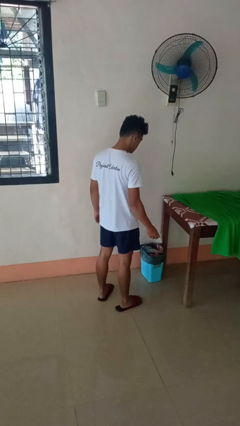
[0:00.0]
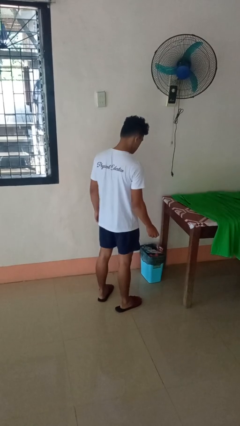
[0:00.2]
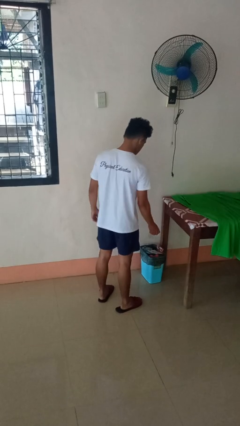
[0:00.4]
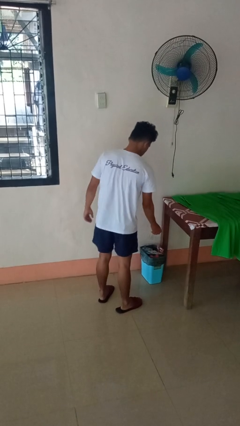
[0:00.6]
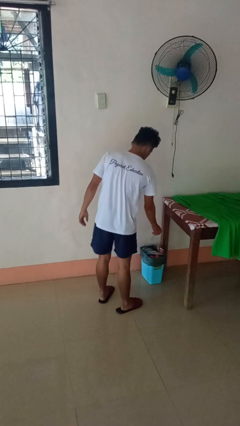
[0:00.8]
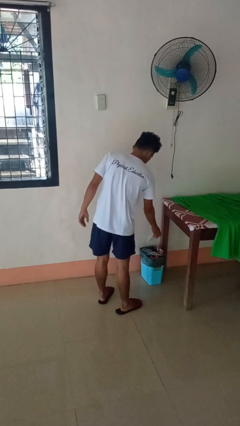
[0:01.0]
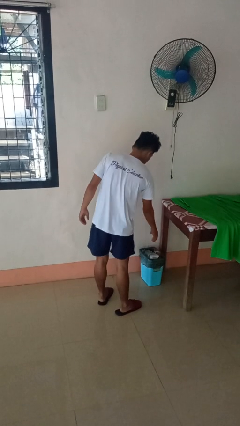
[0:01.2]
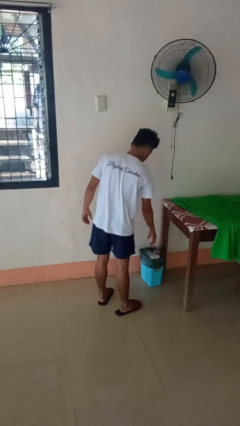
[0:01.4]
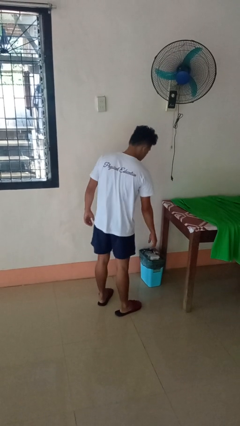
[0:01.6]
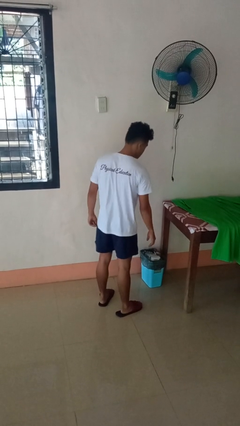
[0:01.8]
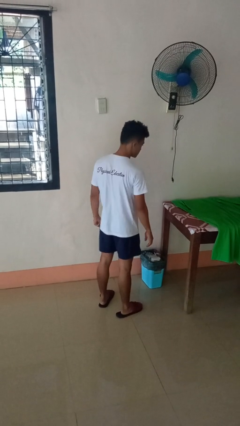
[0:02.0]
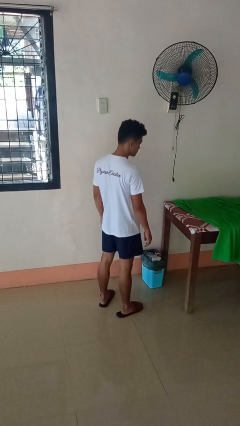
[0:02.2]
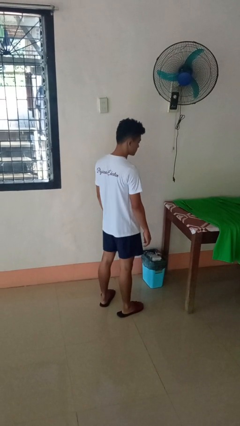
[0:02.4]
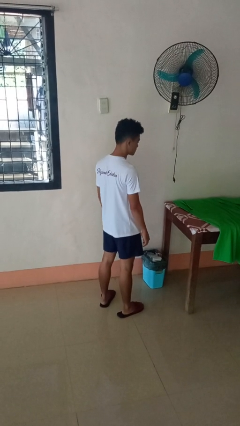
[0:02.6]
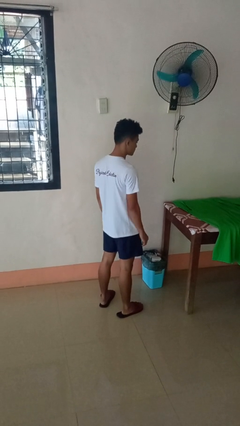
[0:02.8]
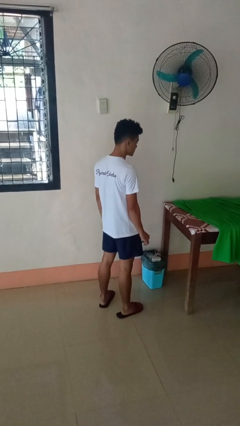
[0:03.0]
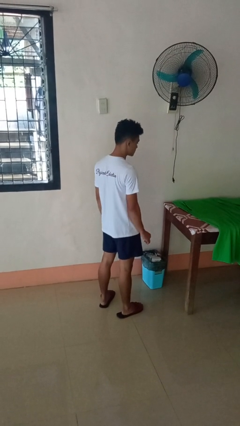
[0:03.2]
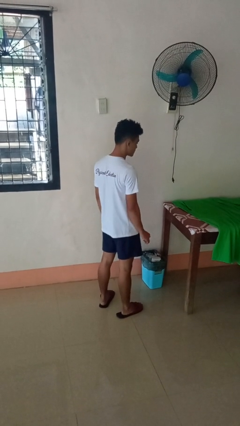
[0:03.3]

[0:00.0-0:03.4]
person discards trash

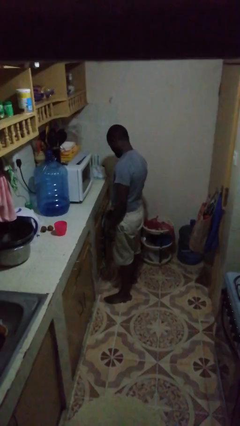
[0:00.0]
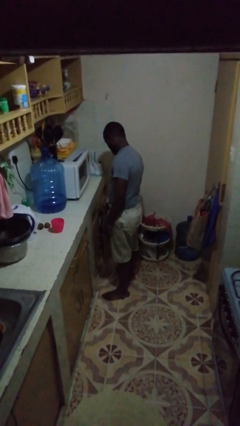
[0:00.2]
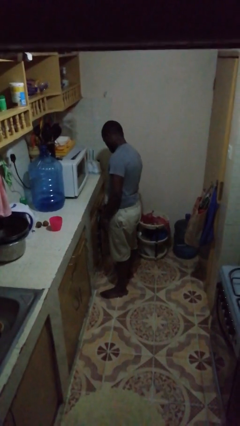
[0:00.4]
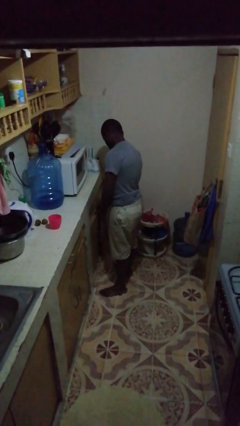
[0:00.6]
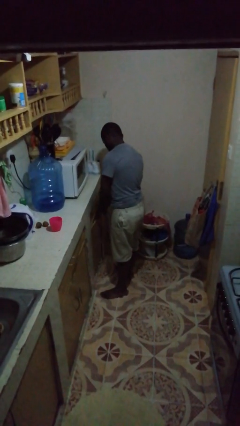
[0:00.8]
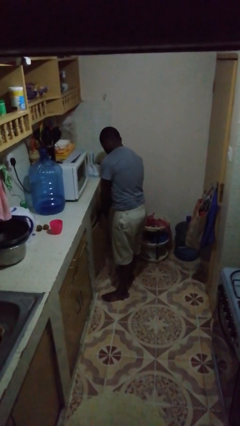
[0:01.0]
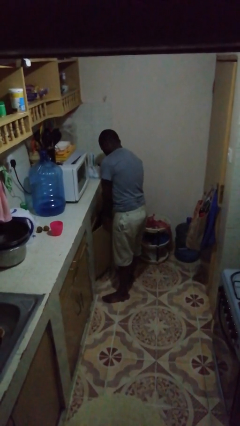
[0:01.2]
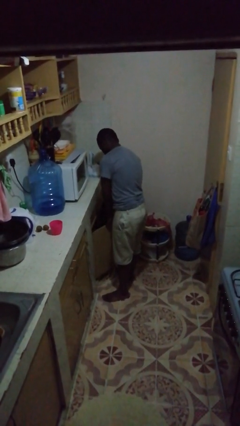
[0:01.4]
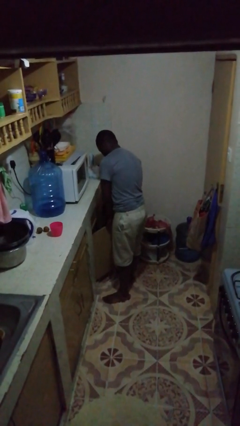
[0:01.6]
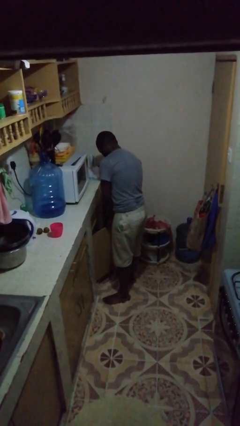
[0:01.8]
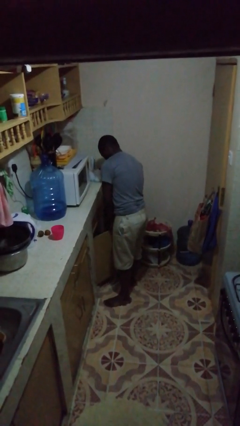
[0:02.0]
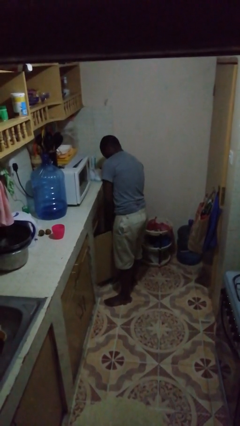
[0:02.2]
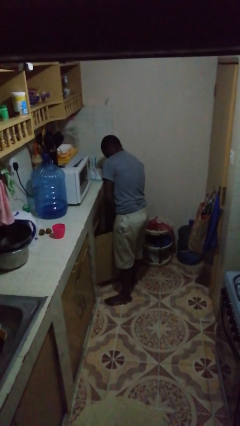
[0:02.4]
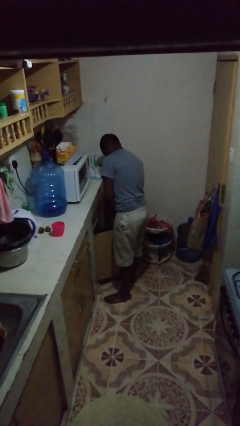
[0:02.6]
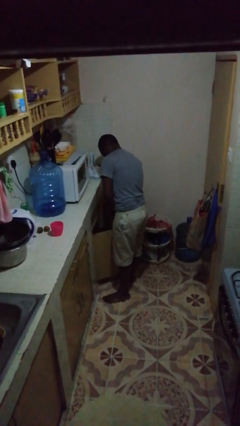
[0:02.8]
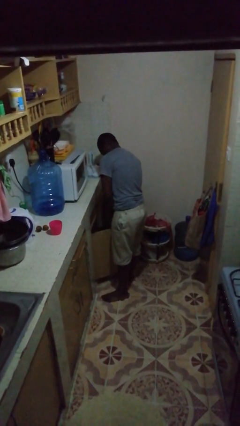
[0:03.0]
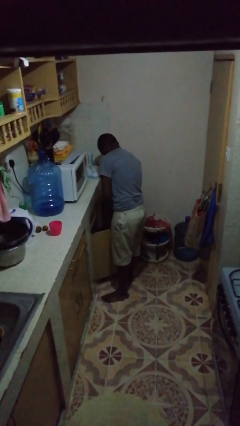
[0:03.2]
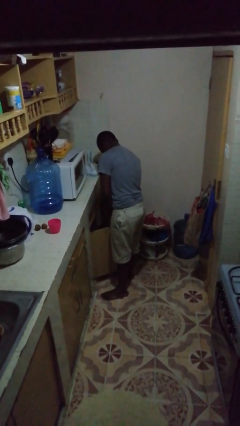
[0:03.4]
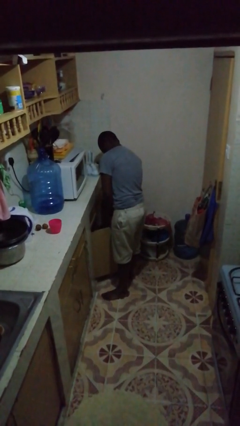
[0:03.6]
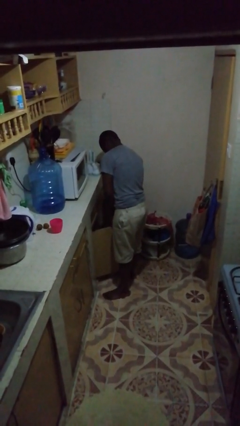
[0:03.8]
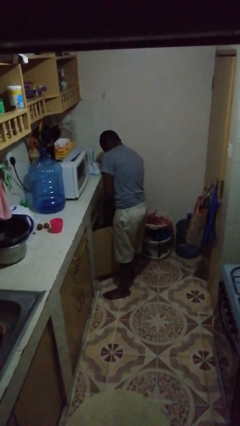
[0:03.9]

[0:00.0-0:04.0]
person opens cabinet

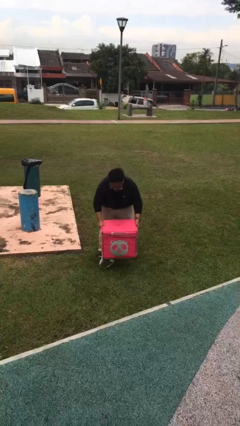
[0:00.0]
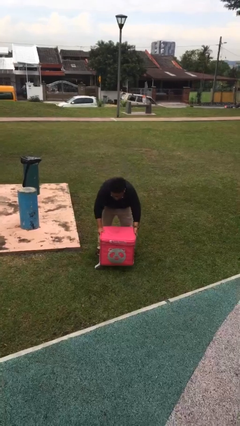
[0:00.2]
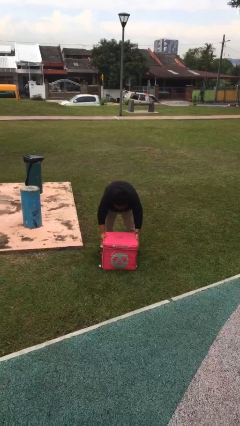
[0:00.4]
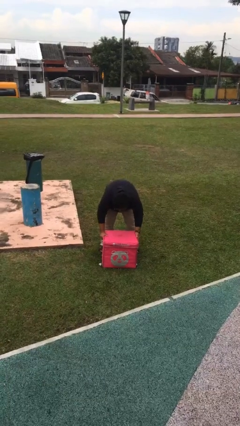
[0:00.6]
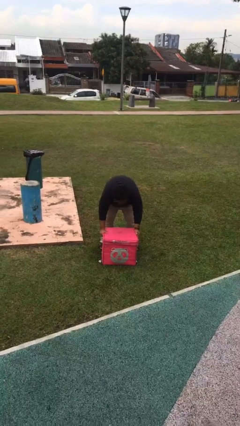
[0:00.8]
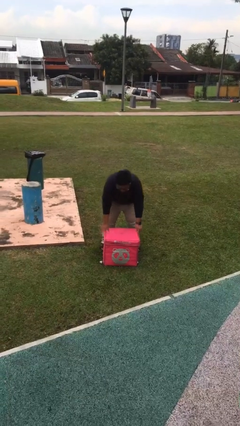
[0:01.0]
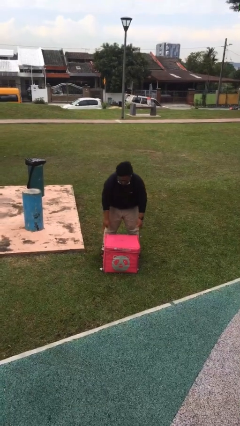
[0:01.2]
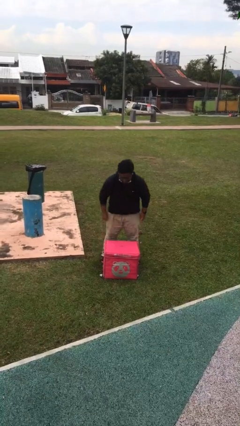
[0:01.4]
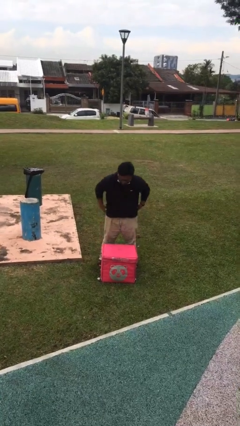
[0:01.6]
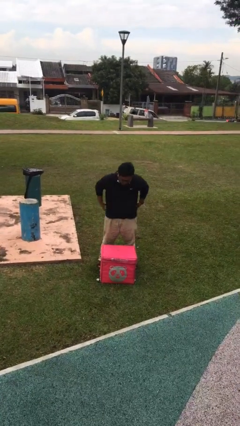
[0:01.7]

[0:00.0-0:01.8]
person puts down object on floor

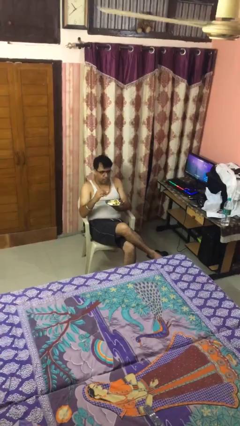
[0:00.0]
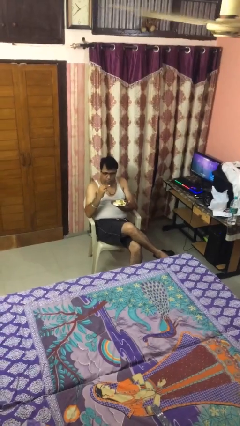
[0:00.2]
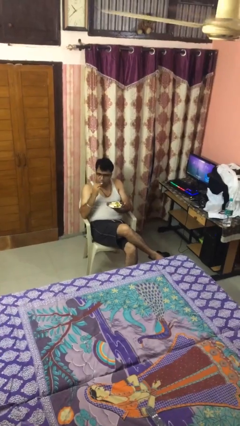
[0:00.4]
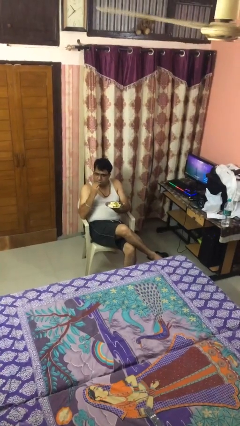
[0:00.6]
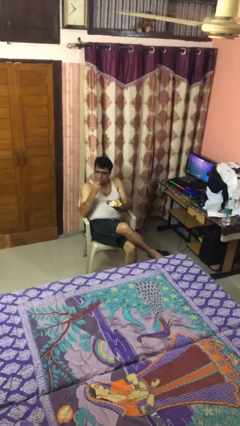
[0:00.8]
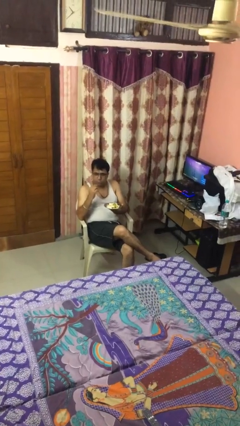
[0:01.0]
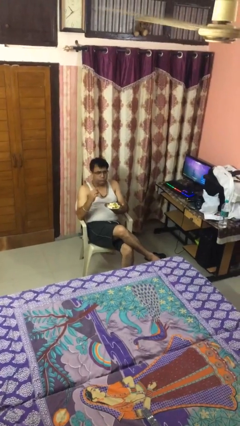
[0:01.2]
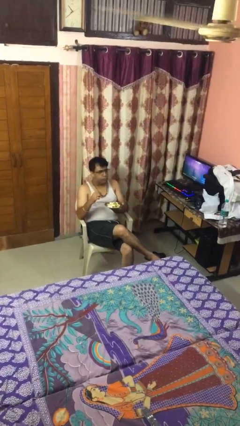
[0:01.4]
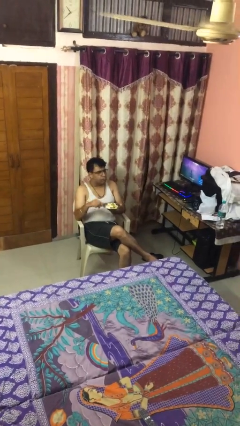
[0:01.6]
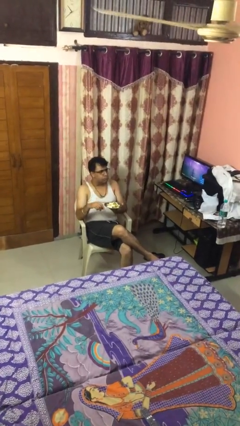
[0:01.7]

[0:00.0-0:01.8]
person eats with hands

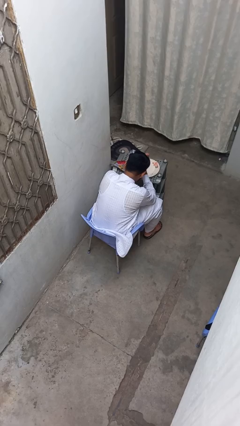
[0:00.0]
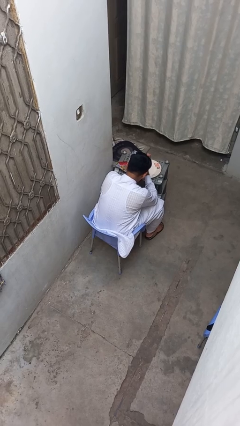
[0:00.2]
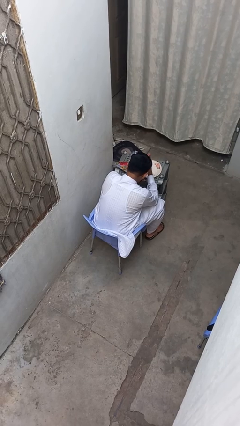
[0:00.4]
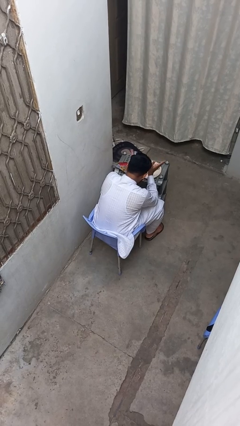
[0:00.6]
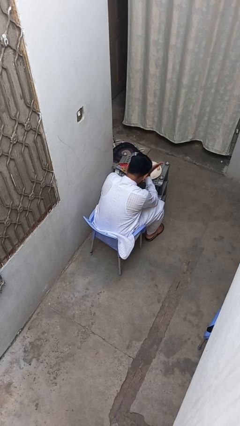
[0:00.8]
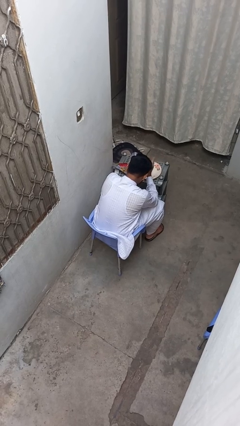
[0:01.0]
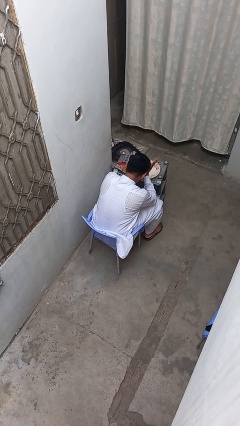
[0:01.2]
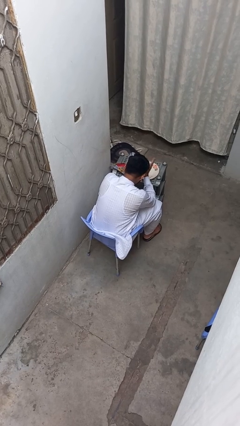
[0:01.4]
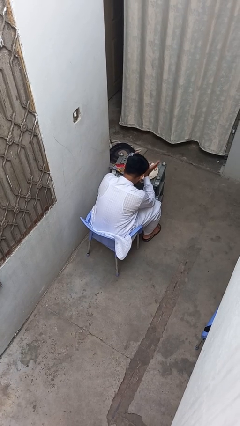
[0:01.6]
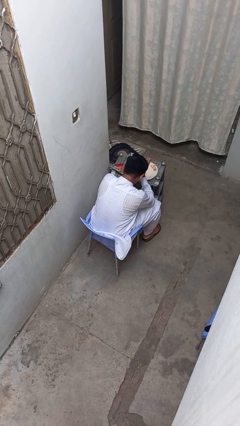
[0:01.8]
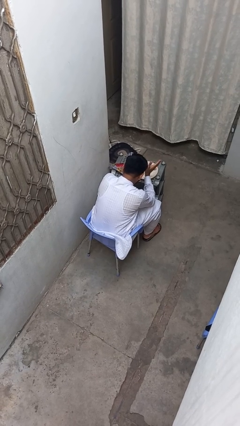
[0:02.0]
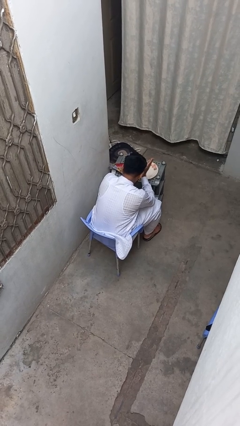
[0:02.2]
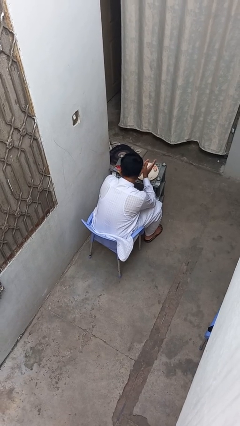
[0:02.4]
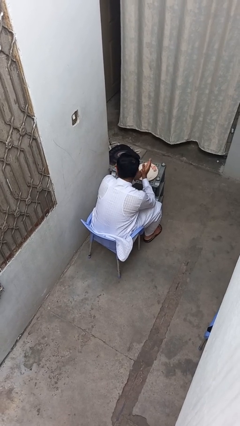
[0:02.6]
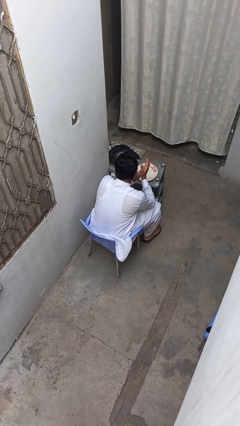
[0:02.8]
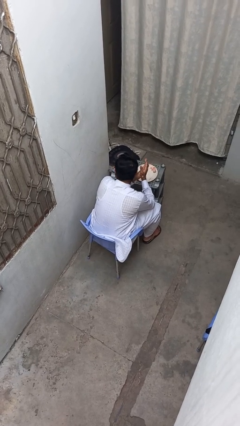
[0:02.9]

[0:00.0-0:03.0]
person claps hands

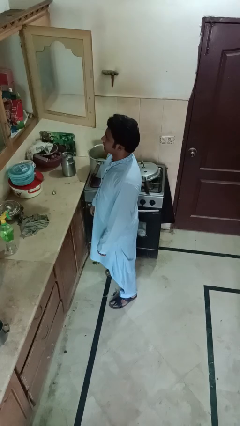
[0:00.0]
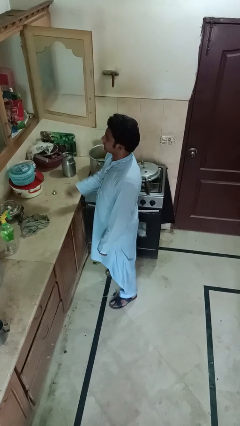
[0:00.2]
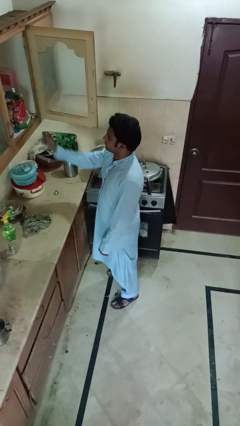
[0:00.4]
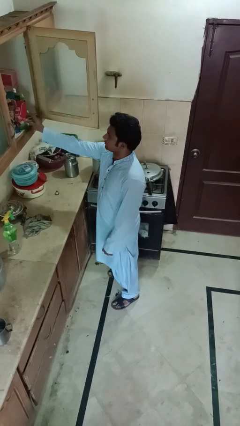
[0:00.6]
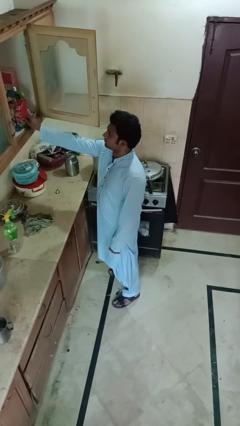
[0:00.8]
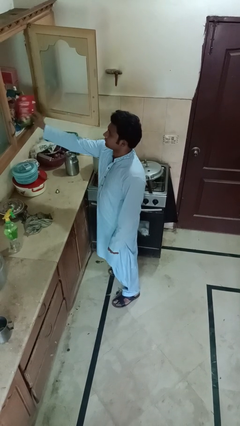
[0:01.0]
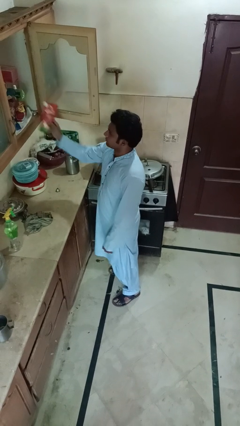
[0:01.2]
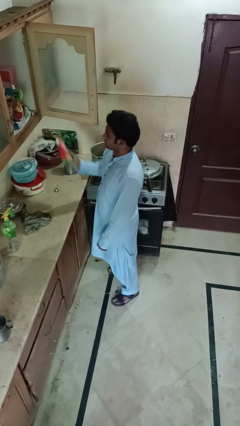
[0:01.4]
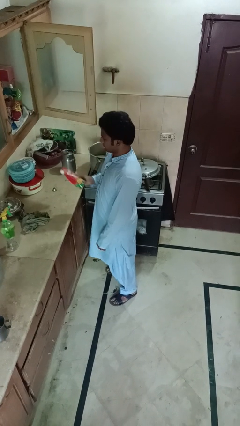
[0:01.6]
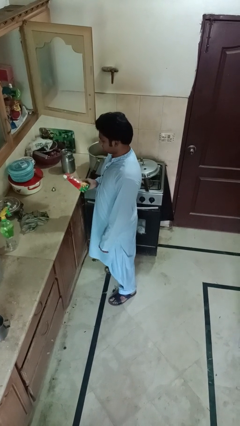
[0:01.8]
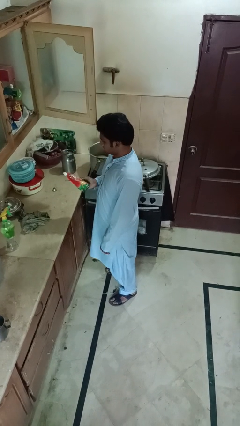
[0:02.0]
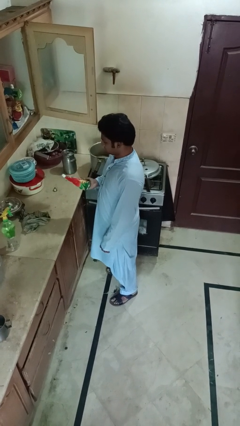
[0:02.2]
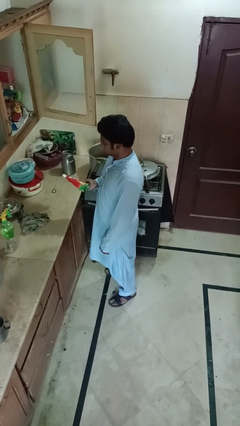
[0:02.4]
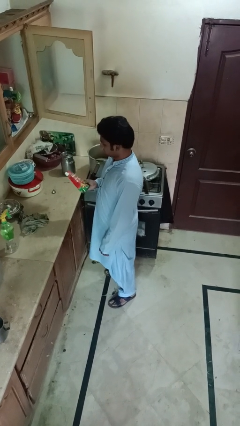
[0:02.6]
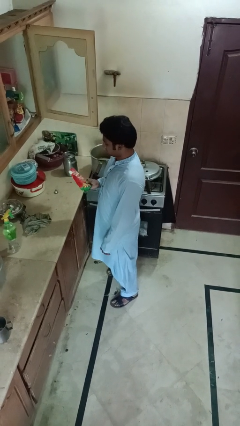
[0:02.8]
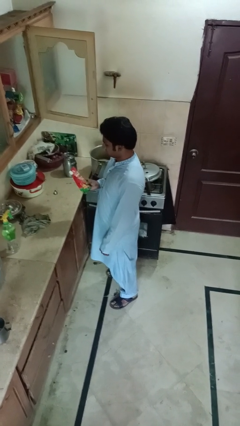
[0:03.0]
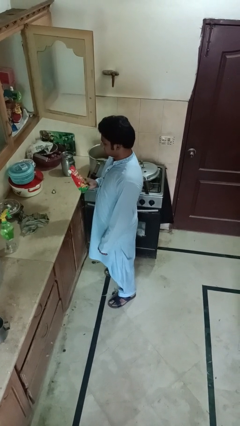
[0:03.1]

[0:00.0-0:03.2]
person picks up object from cabinet

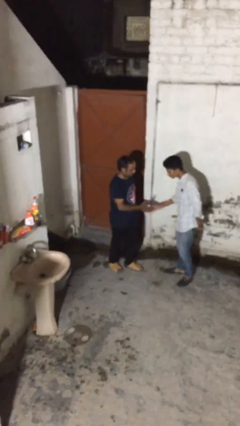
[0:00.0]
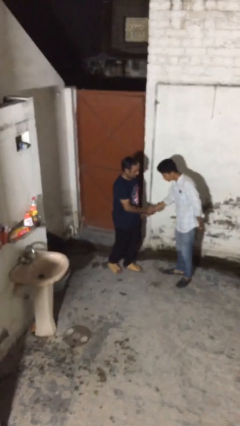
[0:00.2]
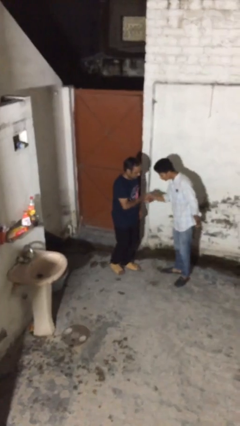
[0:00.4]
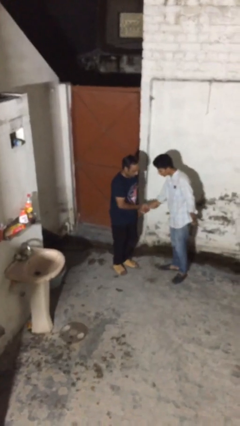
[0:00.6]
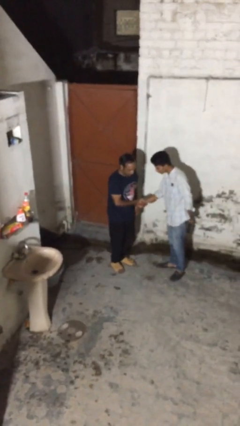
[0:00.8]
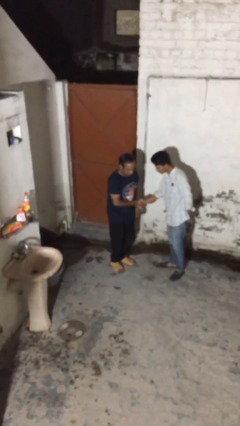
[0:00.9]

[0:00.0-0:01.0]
person shakes hand
